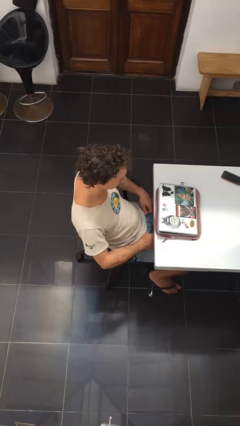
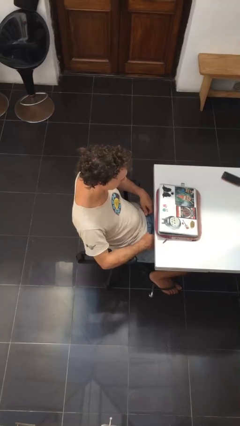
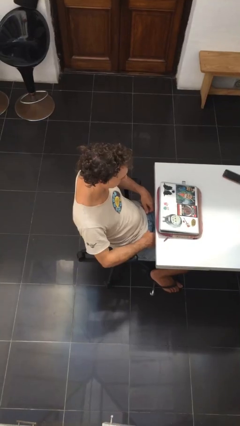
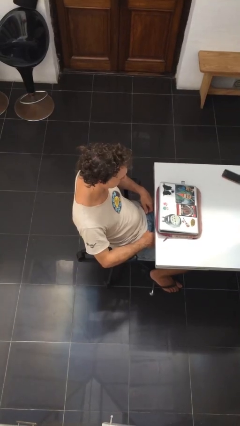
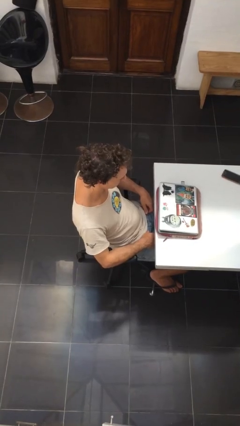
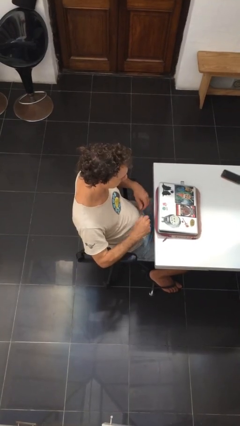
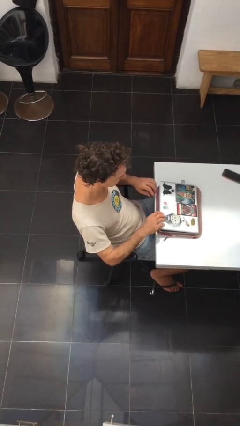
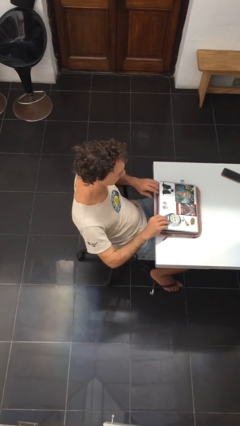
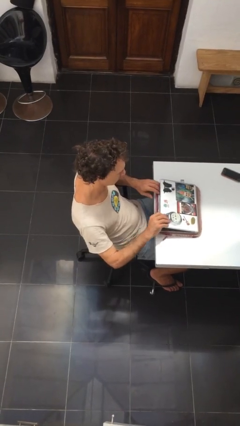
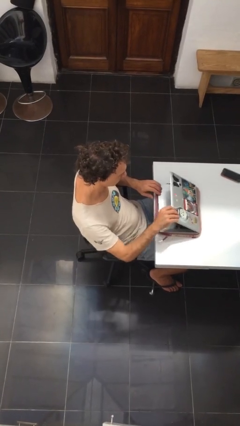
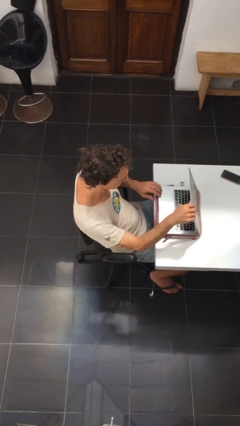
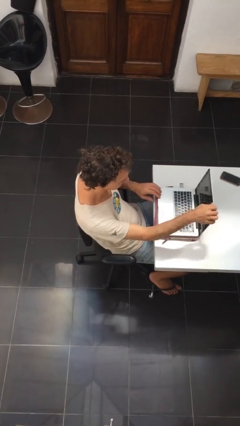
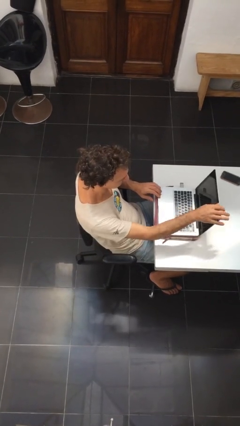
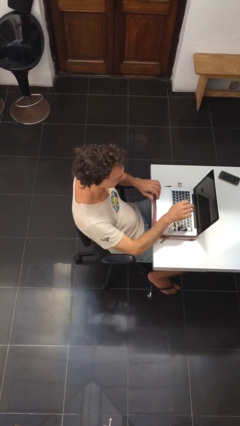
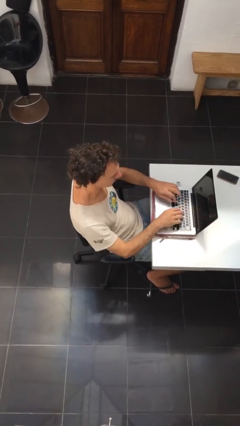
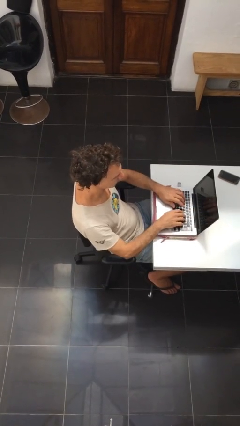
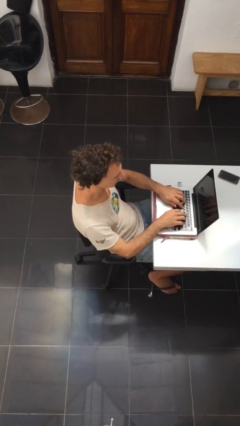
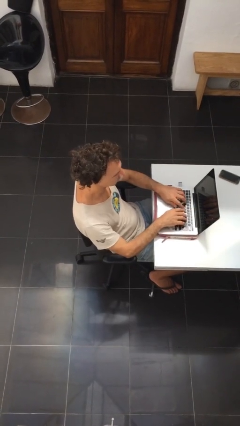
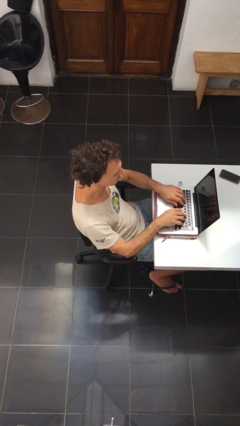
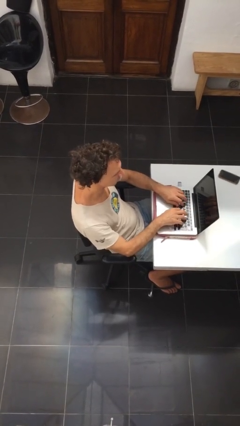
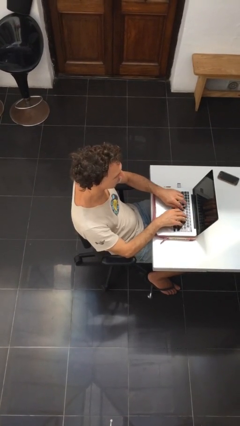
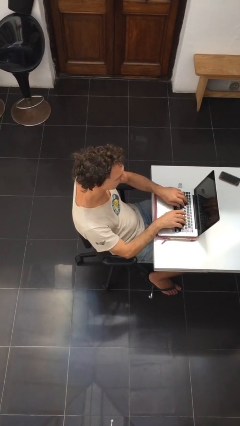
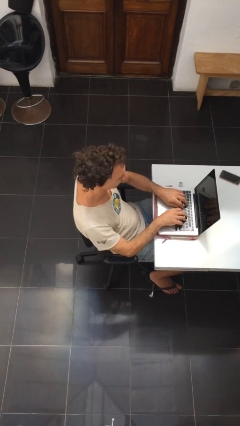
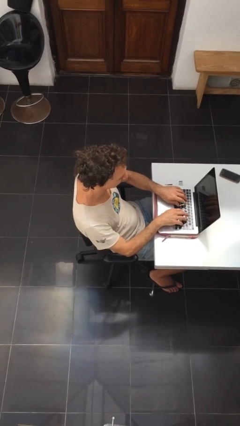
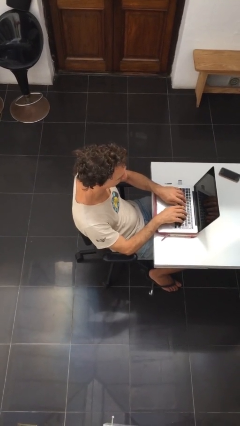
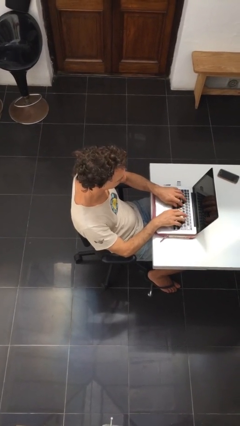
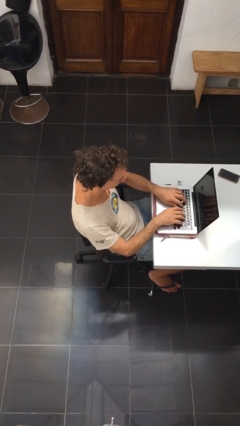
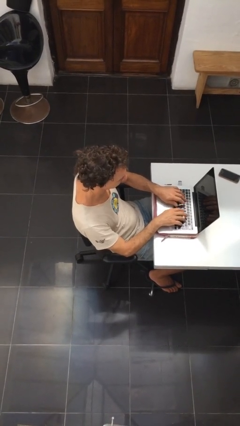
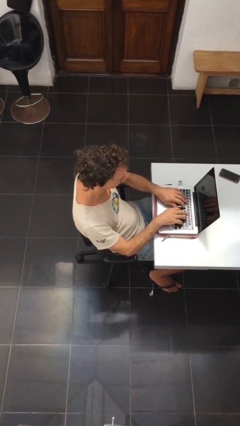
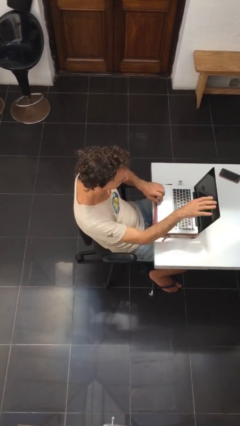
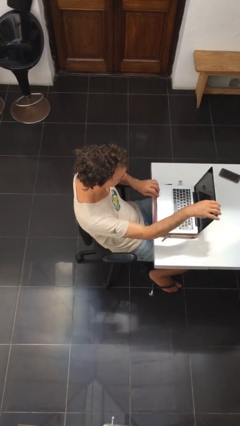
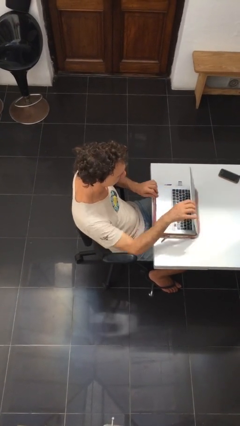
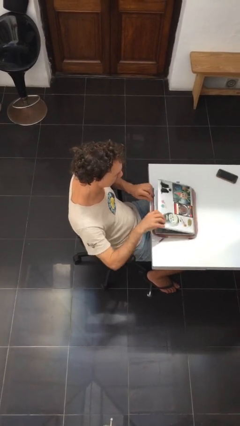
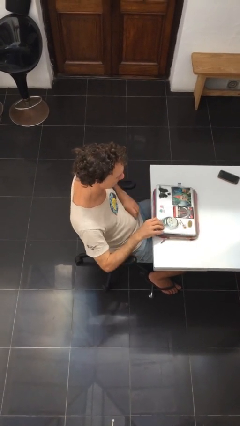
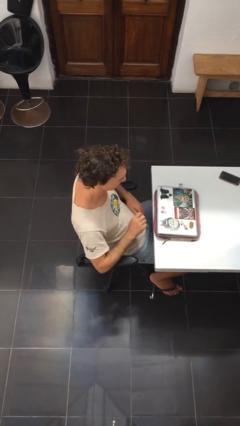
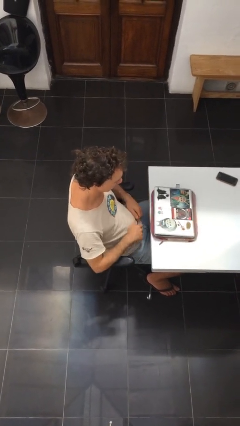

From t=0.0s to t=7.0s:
person interacts with laptop

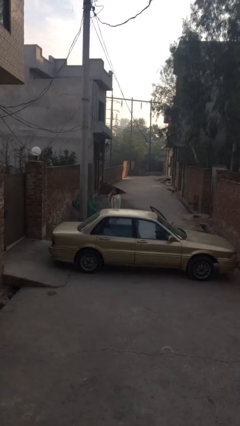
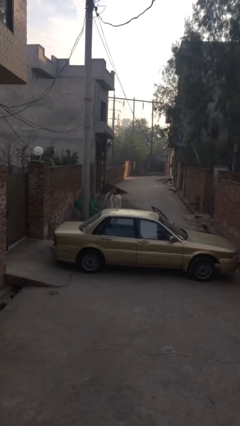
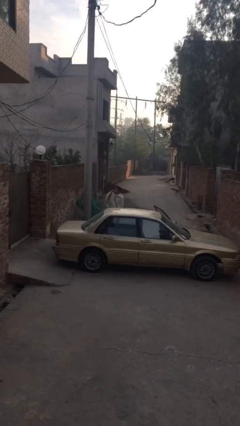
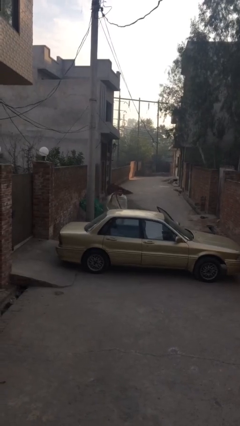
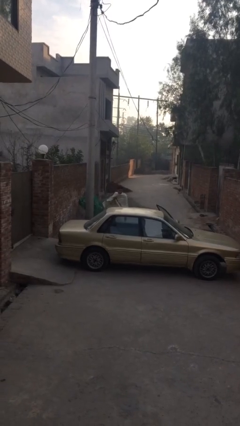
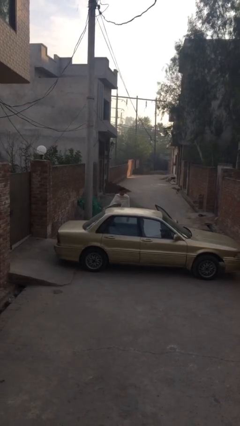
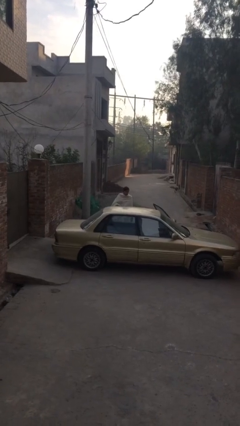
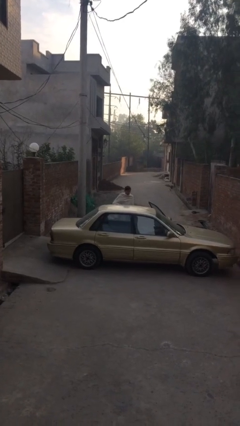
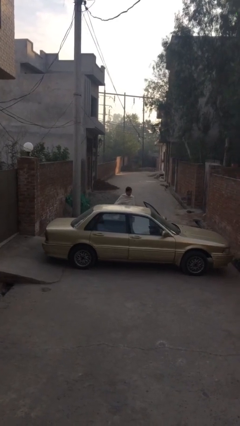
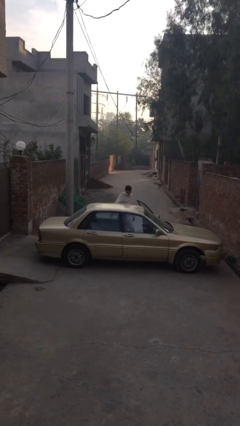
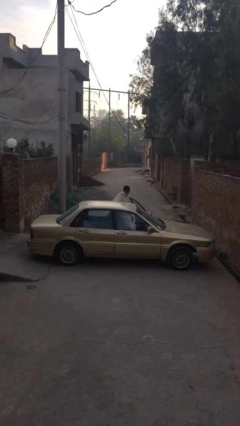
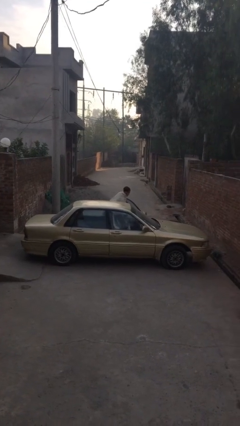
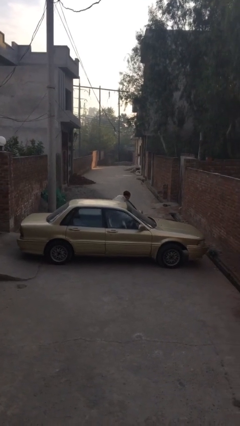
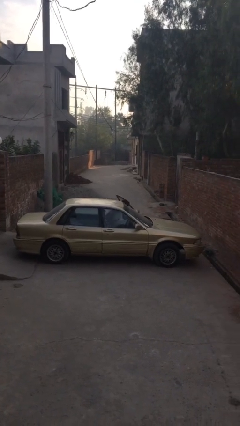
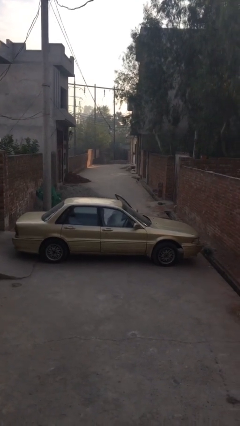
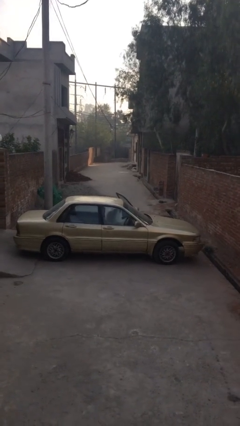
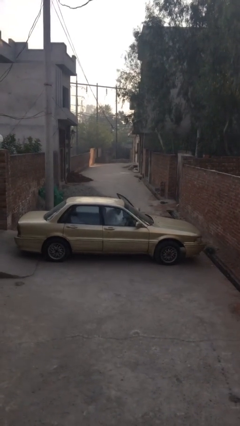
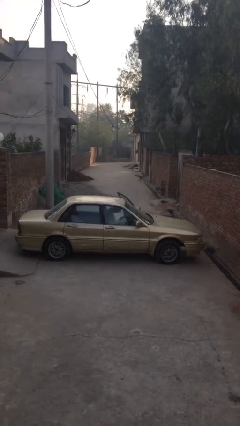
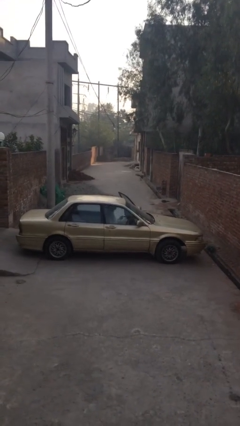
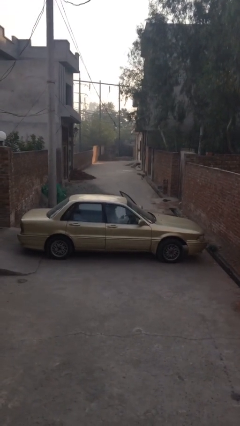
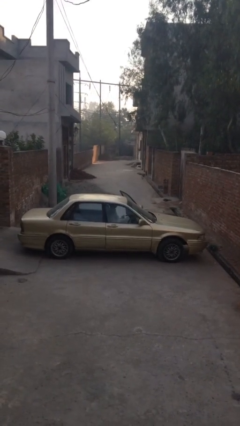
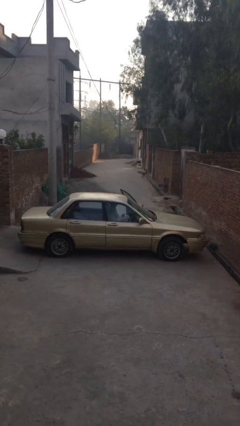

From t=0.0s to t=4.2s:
person enters car

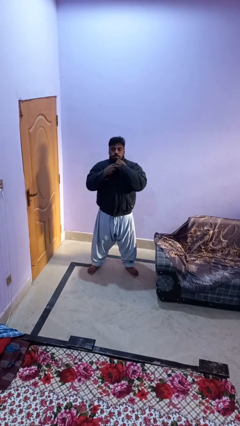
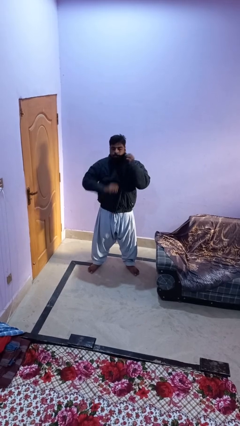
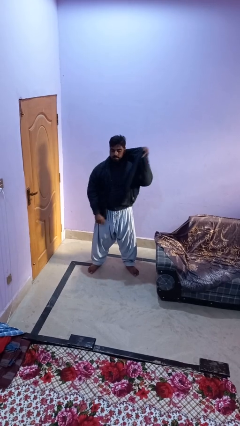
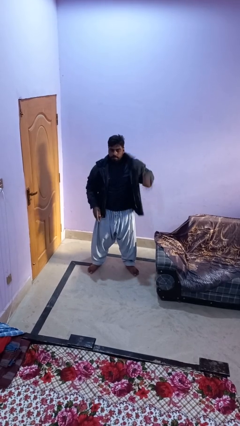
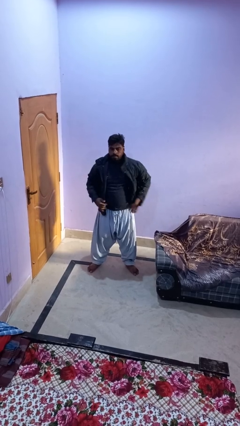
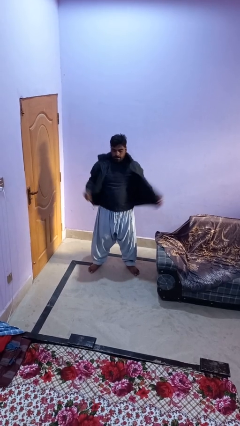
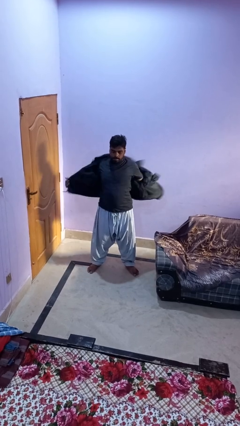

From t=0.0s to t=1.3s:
person unzips jacket

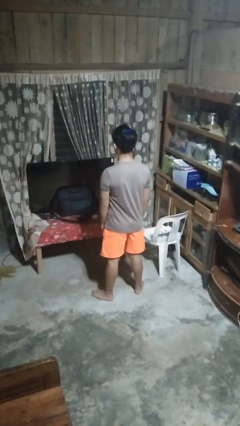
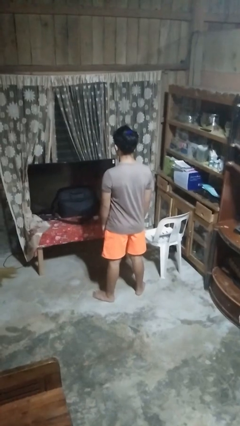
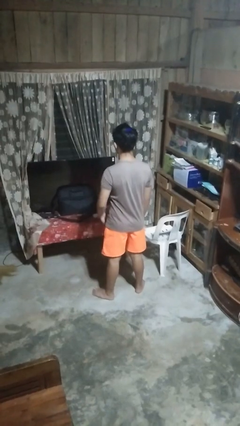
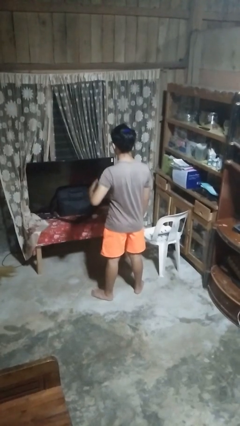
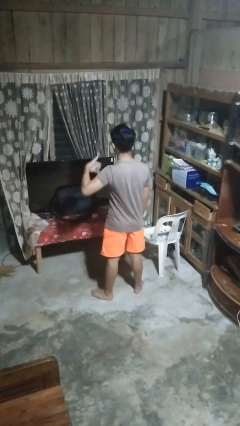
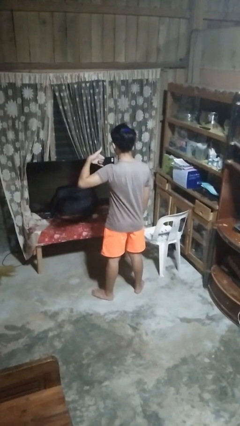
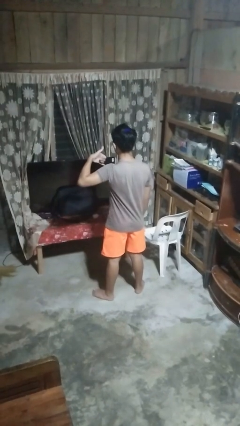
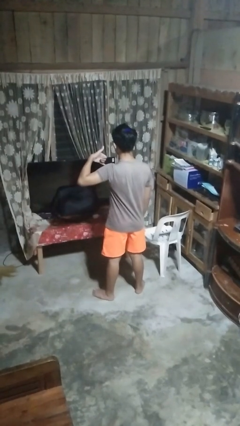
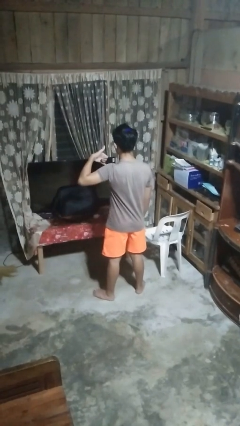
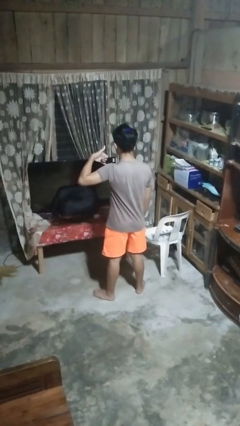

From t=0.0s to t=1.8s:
person gestures call me

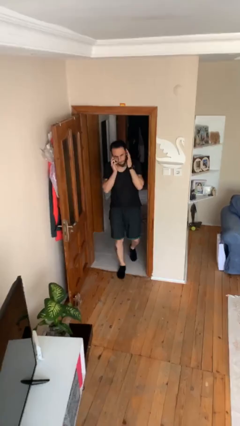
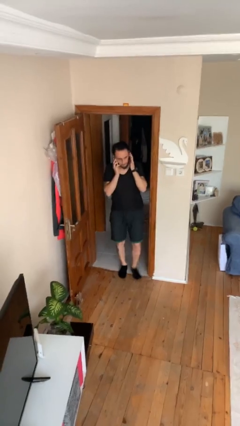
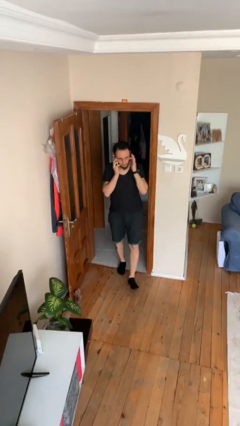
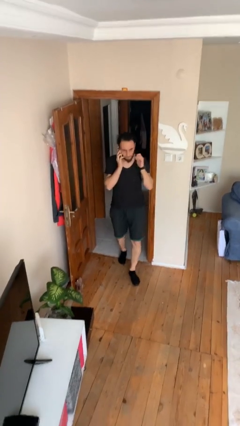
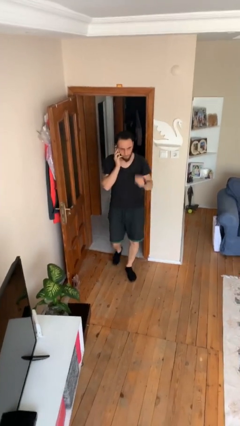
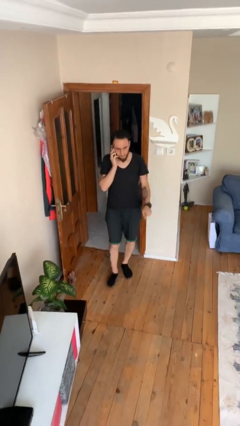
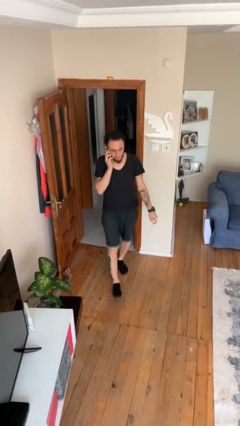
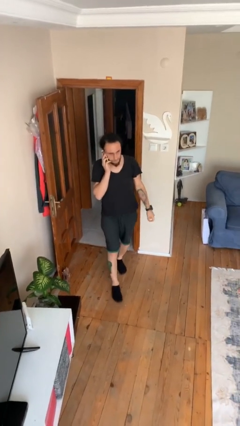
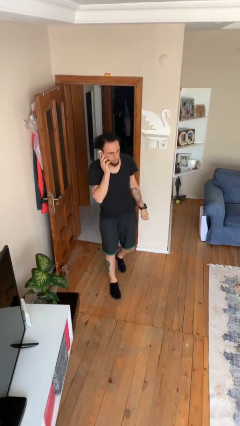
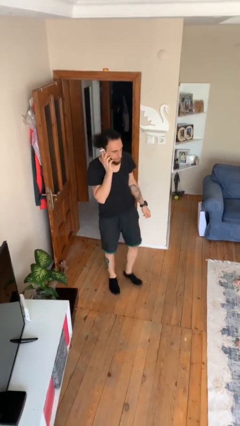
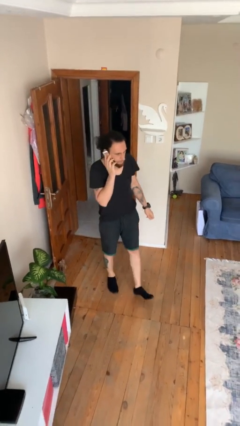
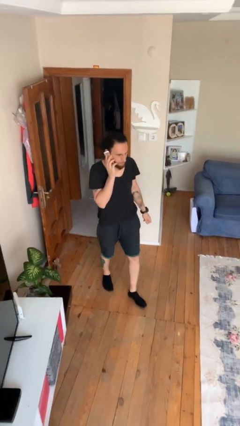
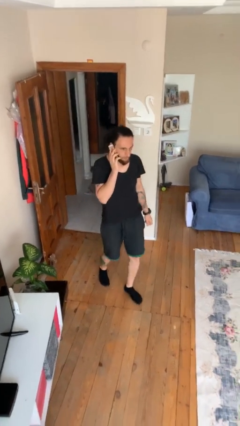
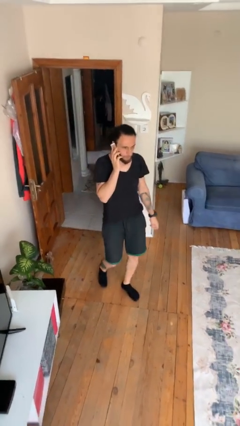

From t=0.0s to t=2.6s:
person enters scene through structure

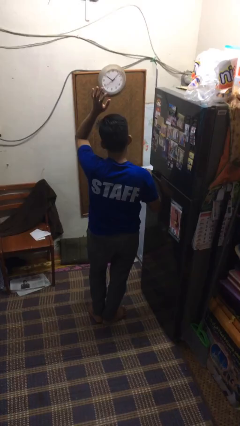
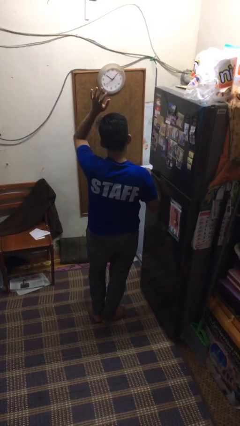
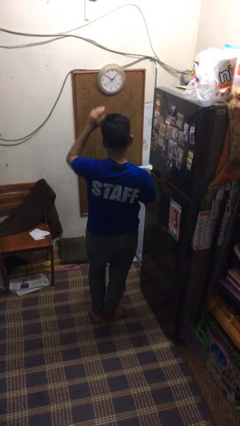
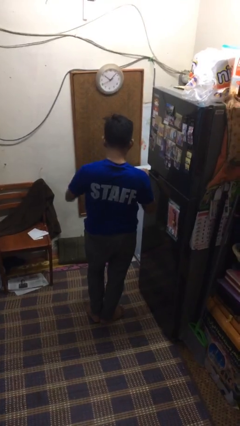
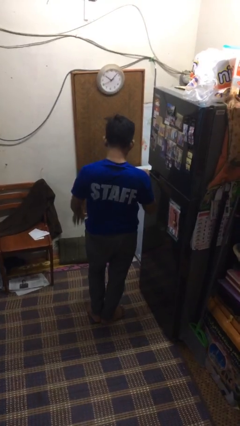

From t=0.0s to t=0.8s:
person gestures lower hand
